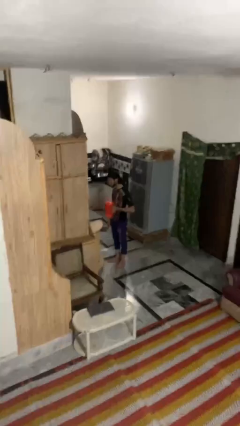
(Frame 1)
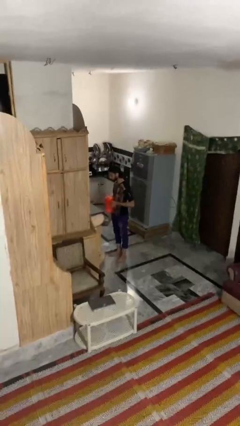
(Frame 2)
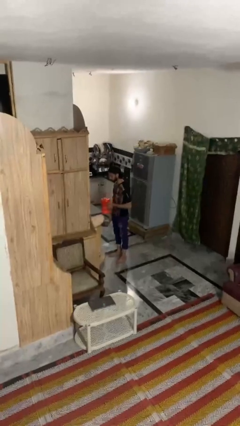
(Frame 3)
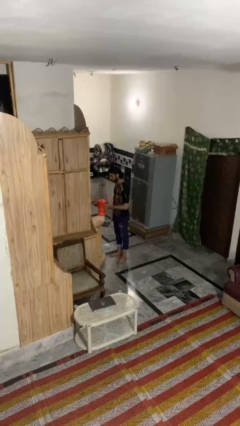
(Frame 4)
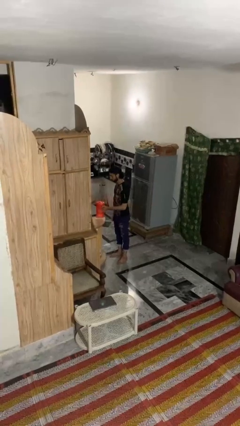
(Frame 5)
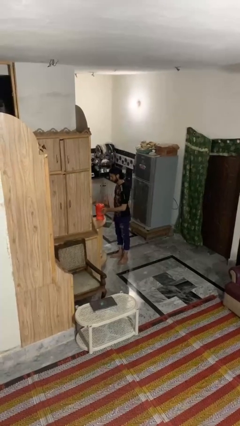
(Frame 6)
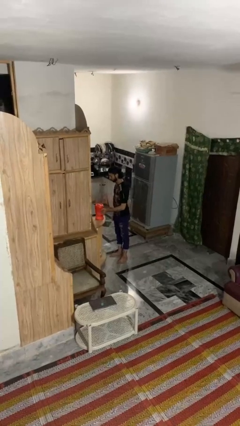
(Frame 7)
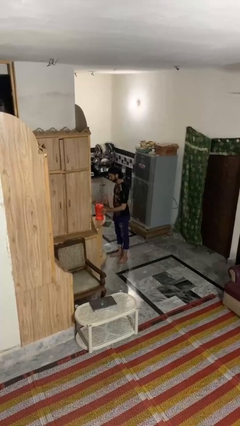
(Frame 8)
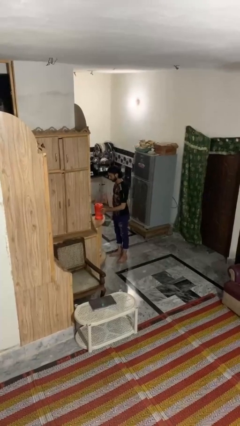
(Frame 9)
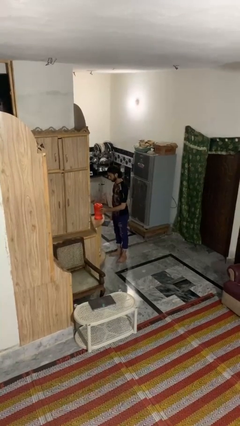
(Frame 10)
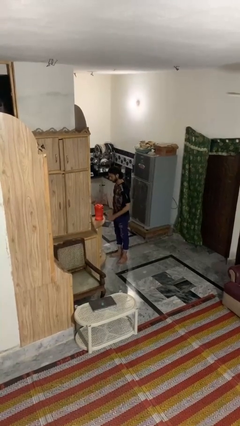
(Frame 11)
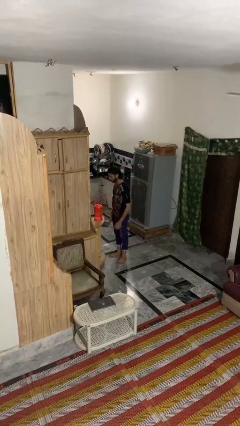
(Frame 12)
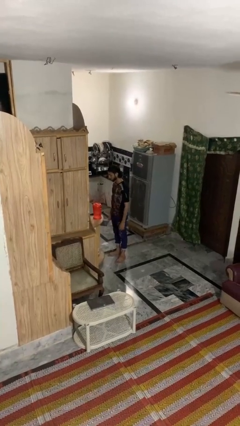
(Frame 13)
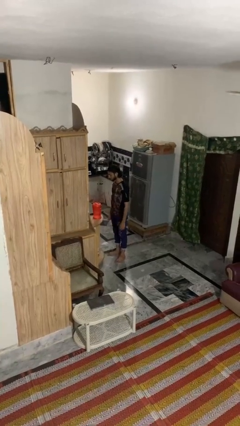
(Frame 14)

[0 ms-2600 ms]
person puts down object on countertop

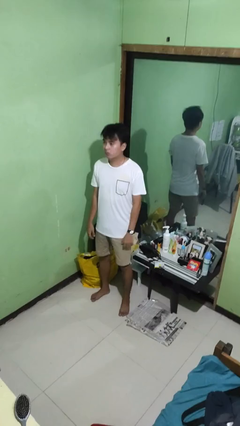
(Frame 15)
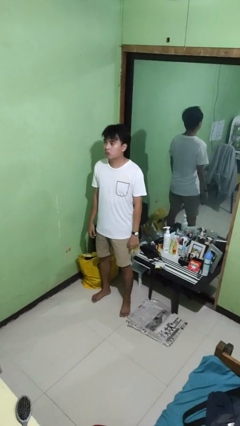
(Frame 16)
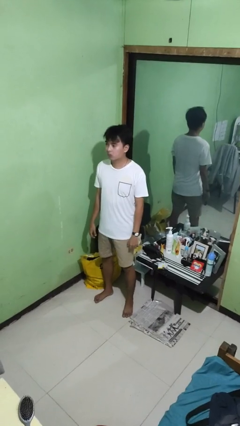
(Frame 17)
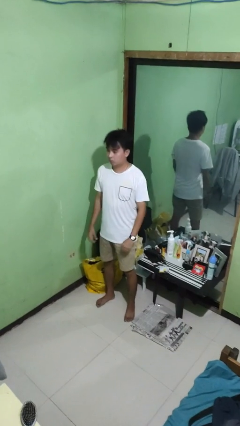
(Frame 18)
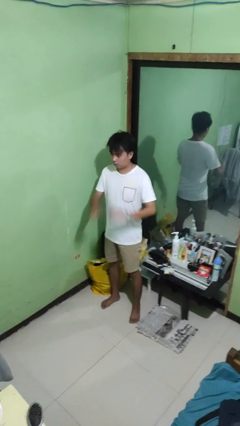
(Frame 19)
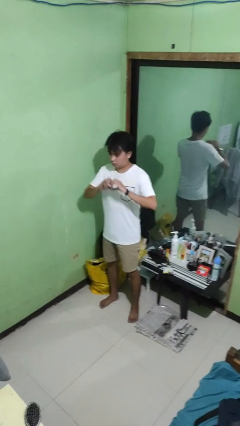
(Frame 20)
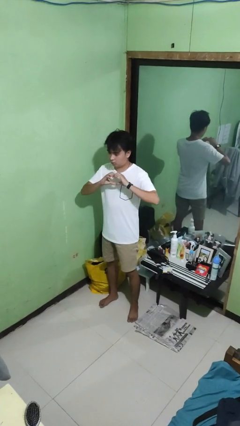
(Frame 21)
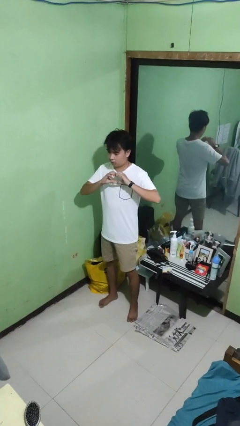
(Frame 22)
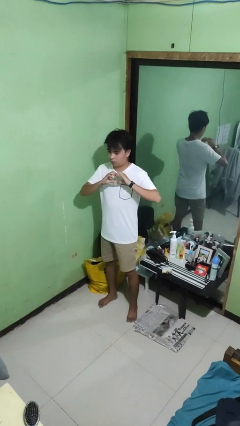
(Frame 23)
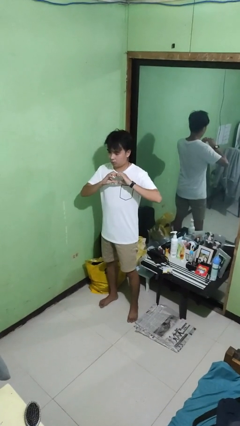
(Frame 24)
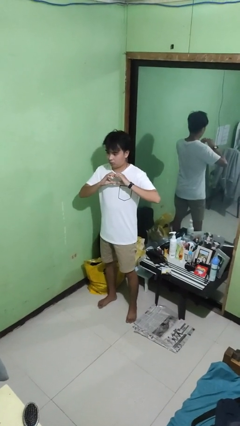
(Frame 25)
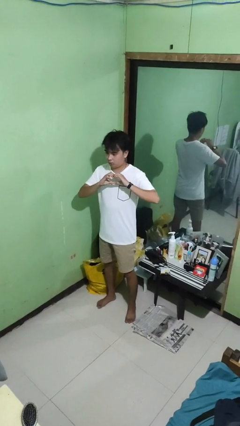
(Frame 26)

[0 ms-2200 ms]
person gestures heart

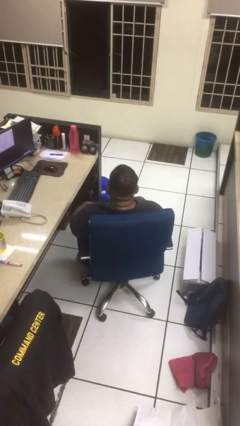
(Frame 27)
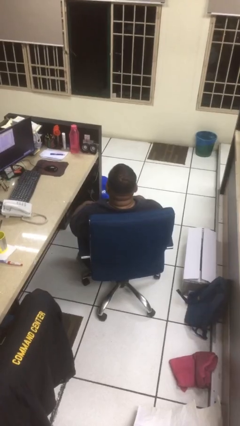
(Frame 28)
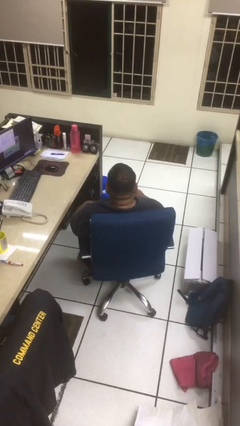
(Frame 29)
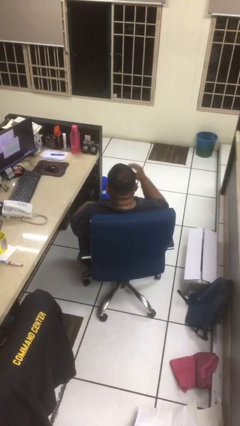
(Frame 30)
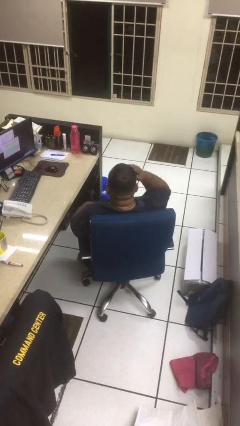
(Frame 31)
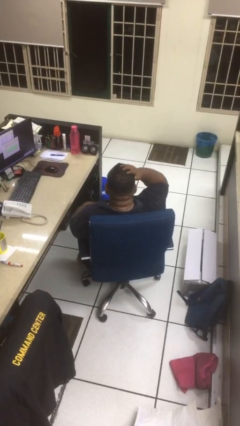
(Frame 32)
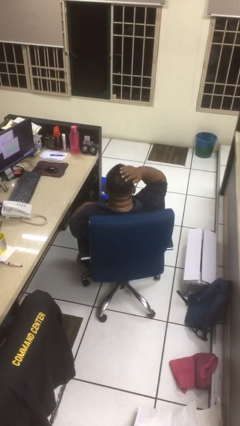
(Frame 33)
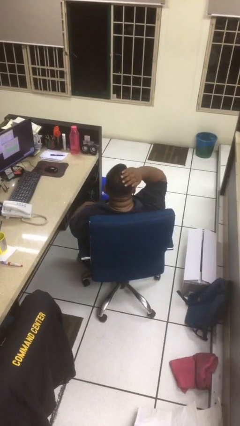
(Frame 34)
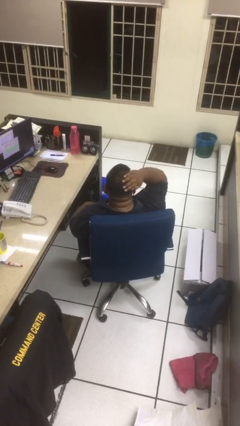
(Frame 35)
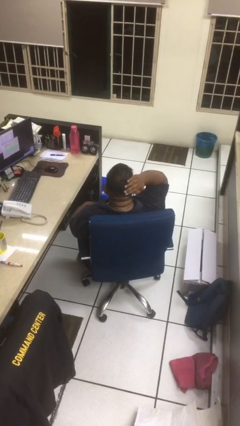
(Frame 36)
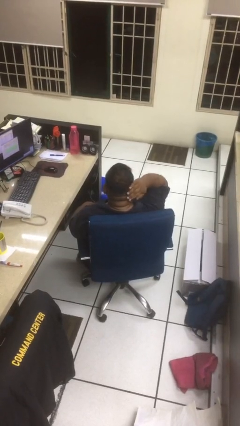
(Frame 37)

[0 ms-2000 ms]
person strokes hair

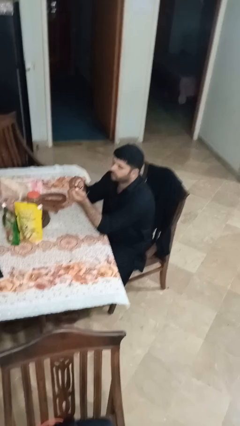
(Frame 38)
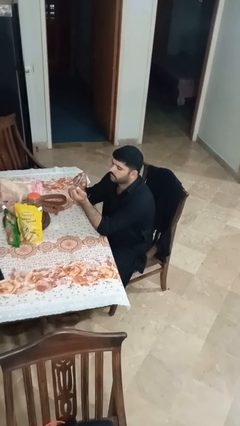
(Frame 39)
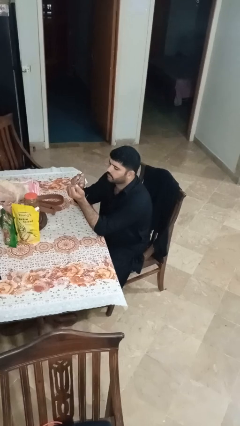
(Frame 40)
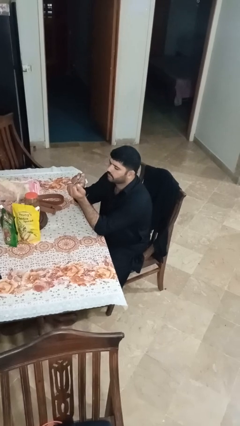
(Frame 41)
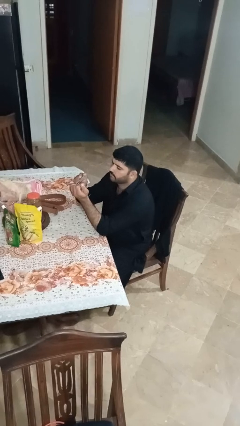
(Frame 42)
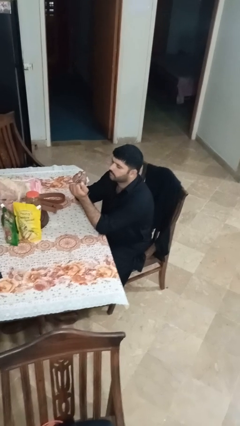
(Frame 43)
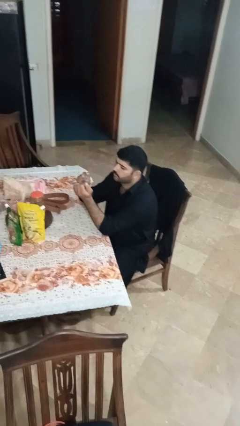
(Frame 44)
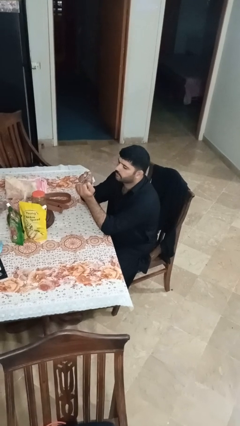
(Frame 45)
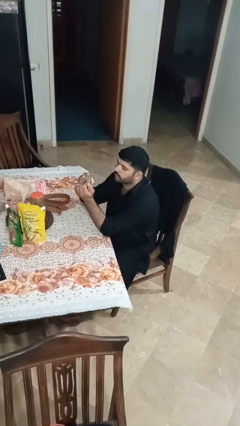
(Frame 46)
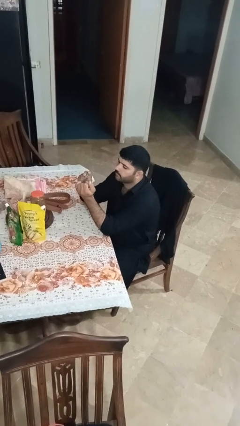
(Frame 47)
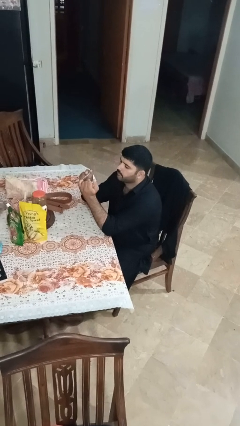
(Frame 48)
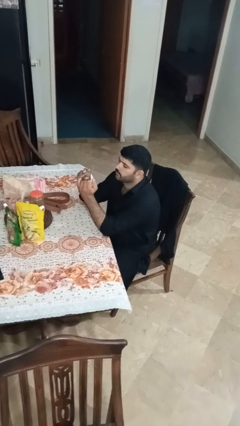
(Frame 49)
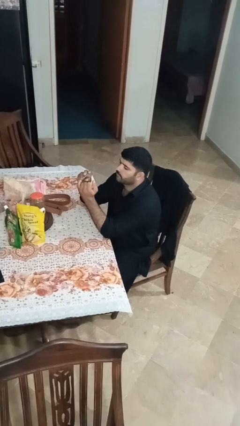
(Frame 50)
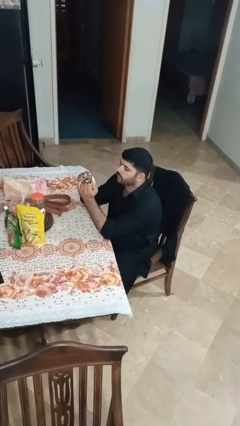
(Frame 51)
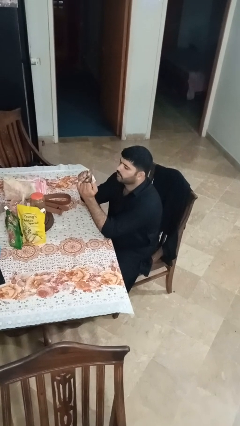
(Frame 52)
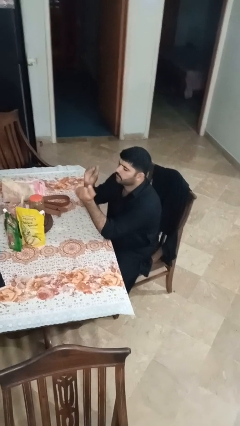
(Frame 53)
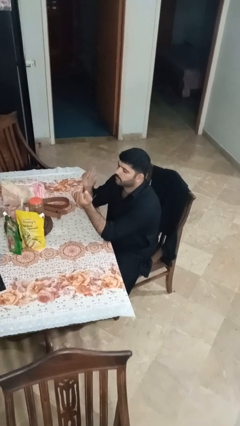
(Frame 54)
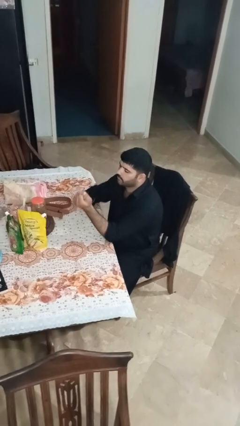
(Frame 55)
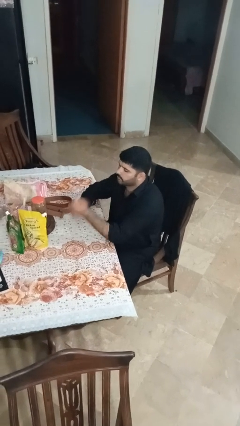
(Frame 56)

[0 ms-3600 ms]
person clips fingernails

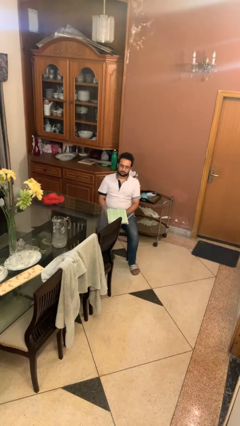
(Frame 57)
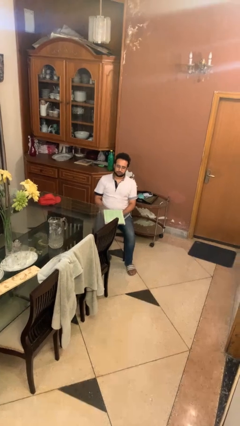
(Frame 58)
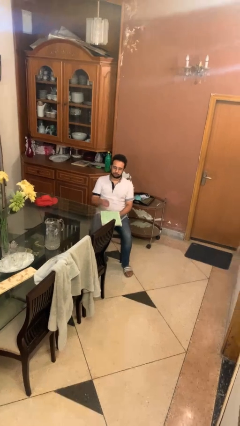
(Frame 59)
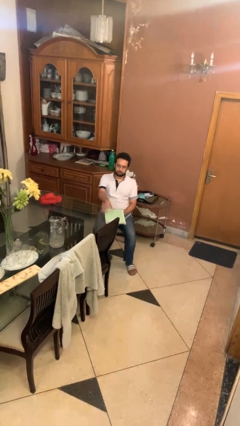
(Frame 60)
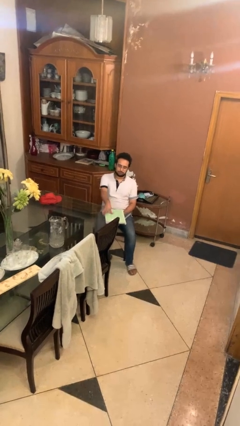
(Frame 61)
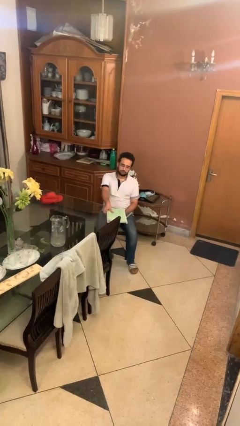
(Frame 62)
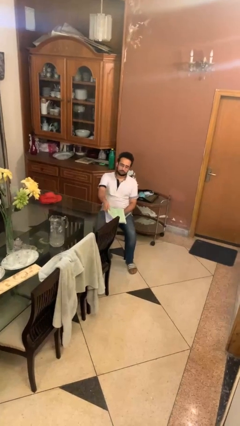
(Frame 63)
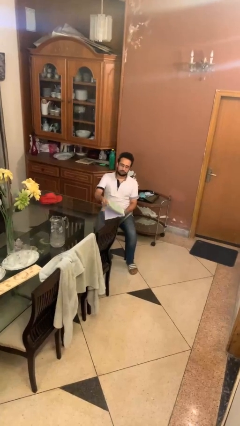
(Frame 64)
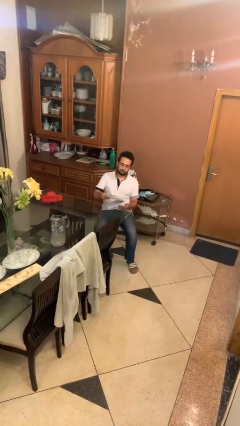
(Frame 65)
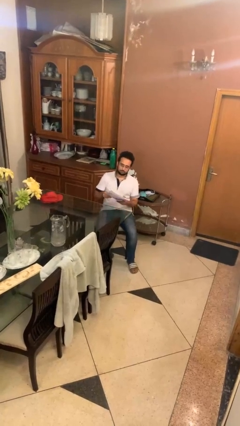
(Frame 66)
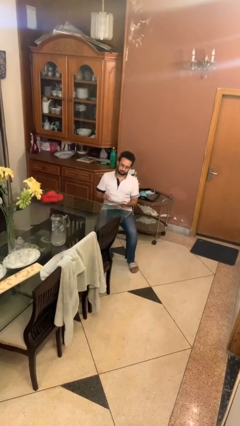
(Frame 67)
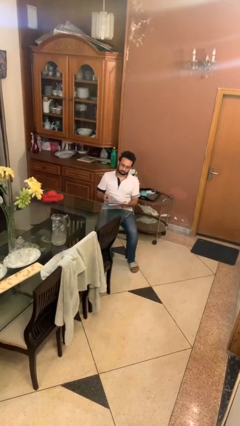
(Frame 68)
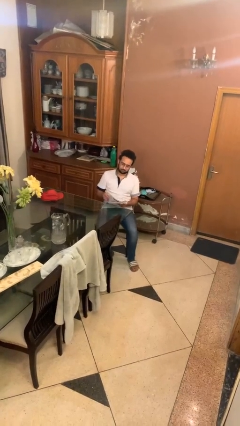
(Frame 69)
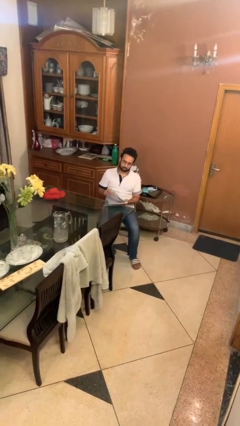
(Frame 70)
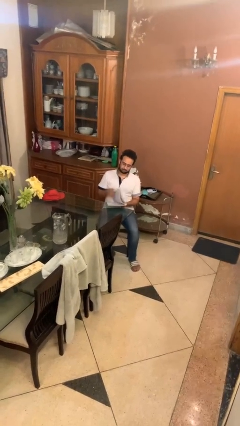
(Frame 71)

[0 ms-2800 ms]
person picks up object from table

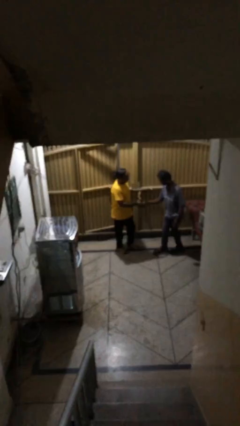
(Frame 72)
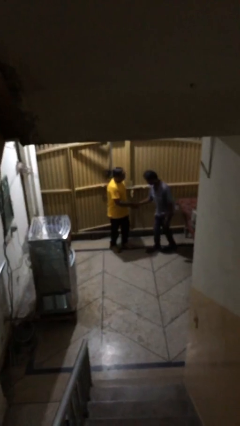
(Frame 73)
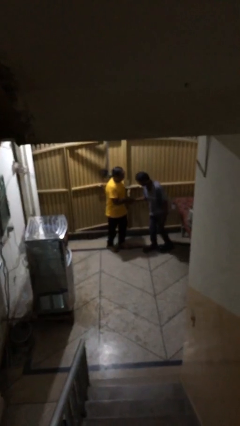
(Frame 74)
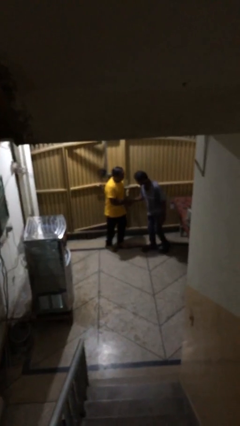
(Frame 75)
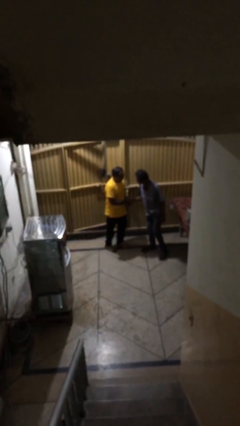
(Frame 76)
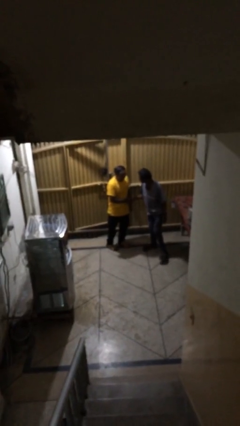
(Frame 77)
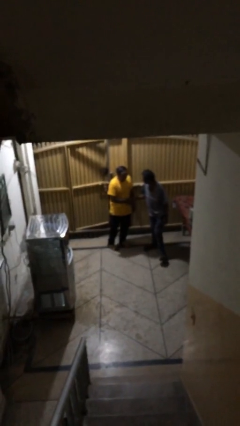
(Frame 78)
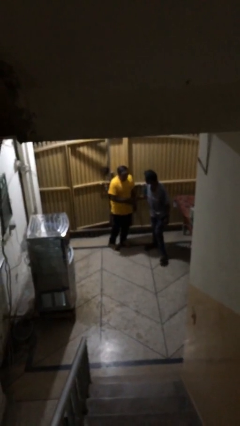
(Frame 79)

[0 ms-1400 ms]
person shakes hand

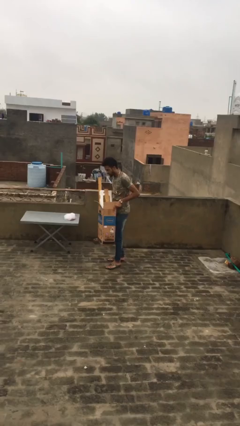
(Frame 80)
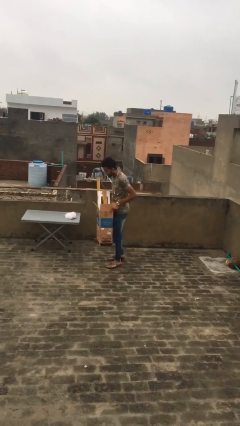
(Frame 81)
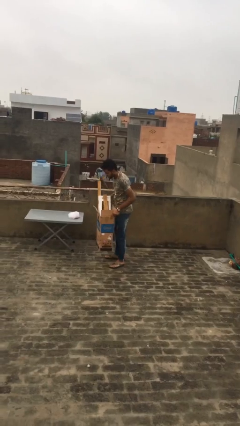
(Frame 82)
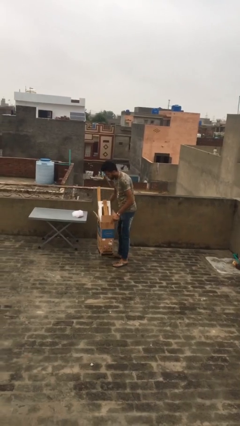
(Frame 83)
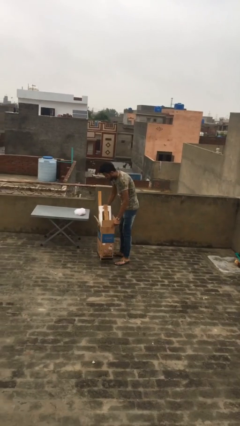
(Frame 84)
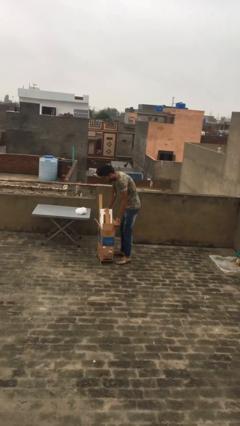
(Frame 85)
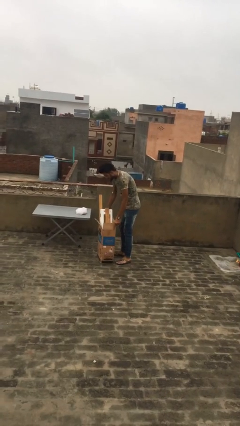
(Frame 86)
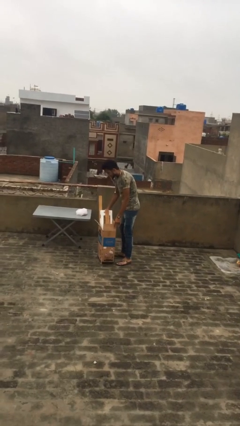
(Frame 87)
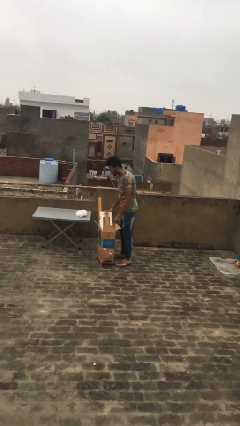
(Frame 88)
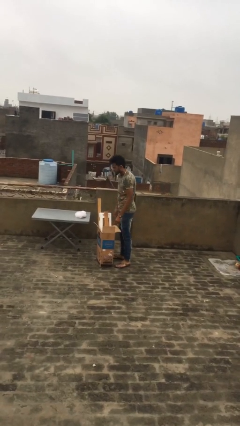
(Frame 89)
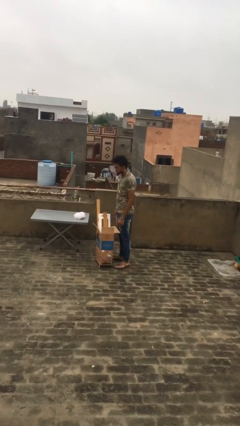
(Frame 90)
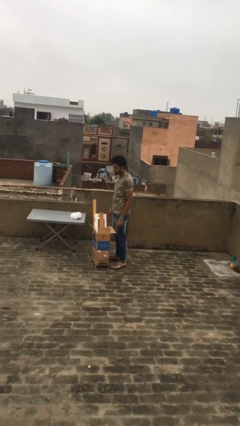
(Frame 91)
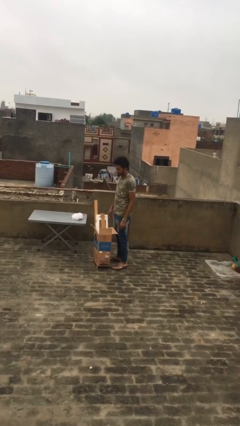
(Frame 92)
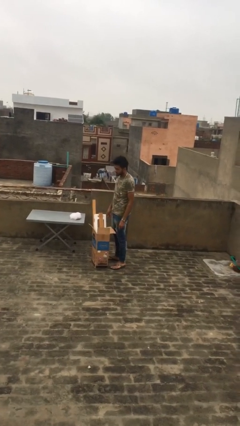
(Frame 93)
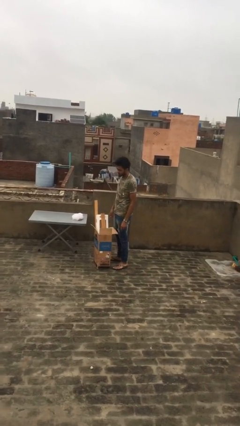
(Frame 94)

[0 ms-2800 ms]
person puts down object on floor
